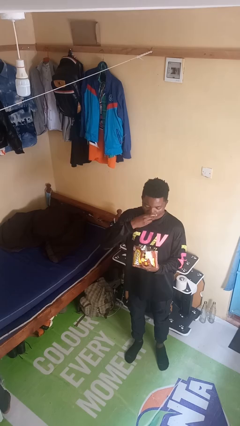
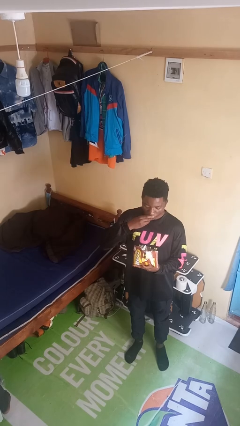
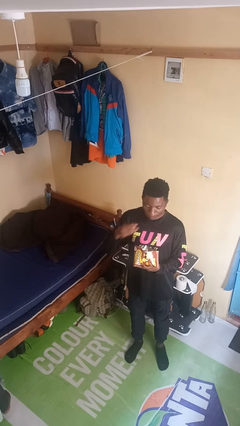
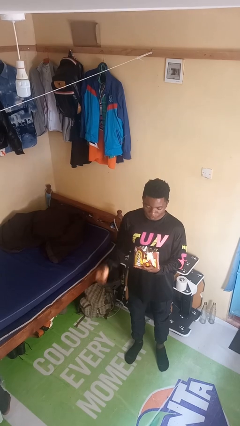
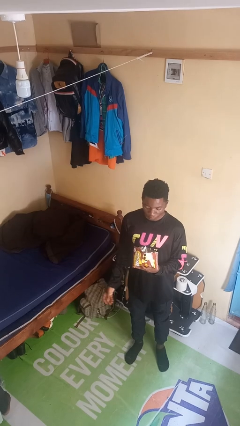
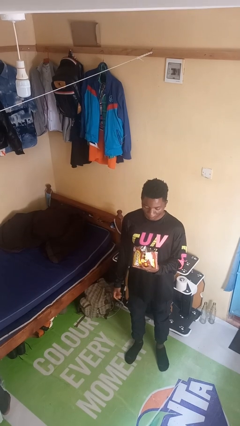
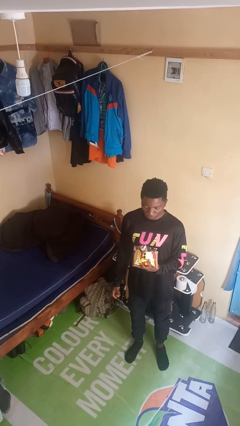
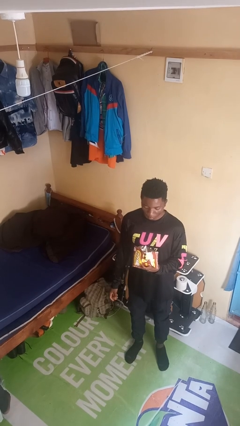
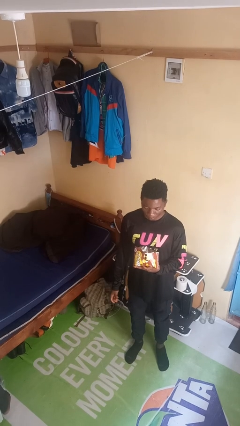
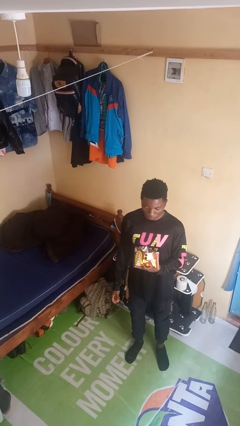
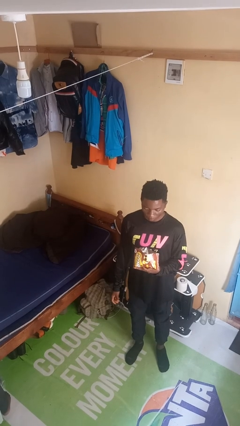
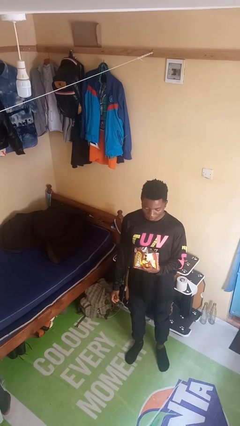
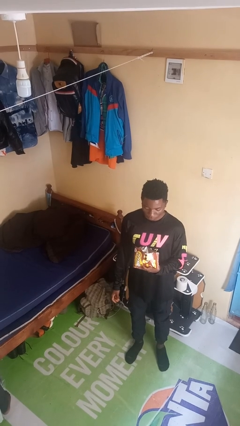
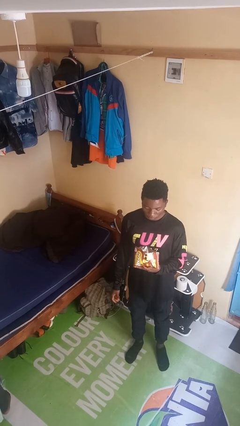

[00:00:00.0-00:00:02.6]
person eats snack from bag

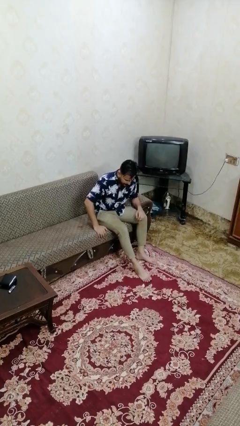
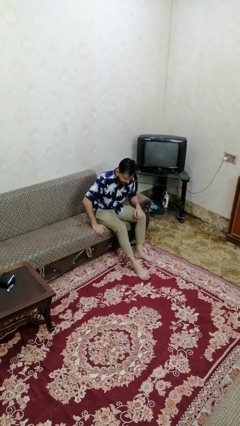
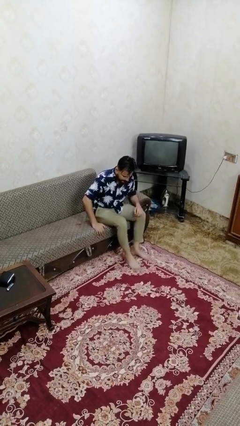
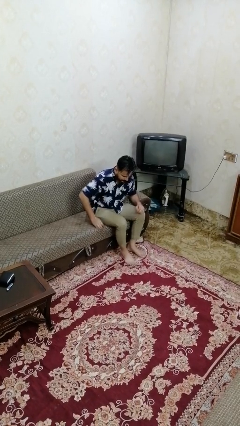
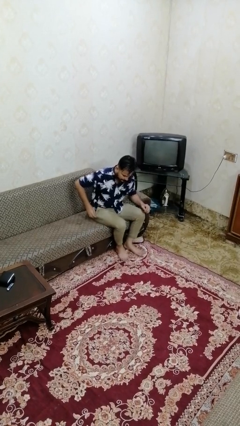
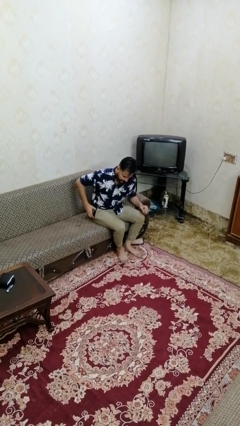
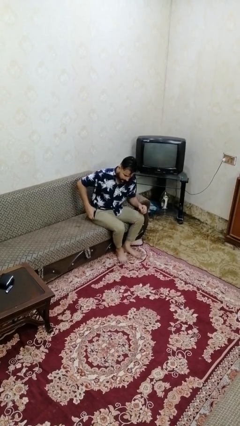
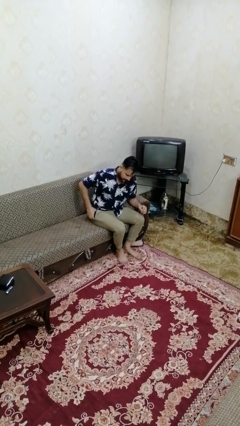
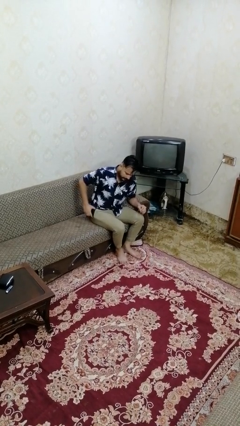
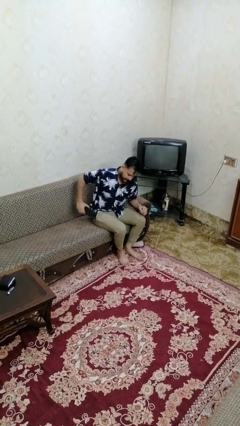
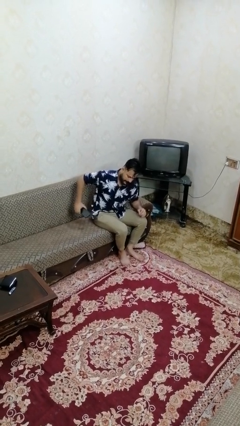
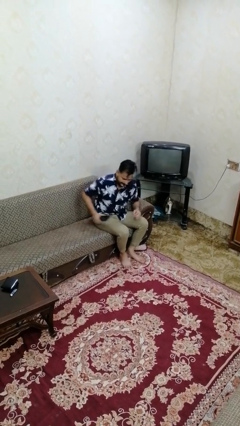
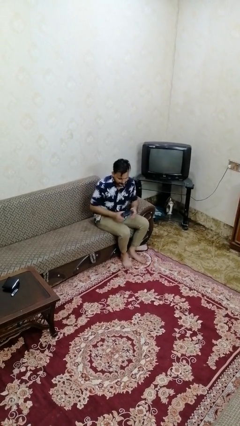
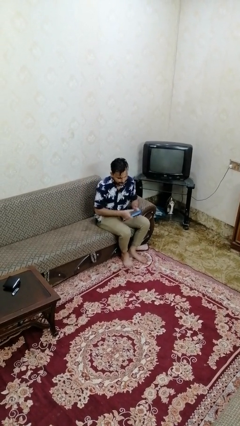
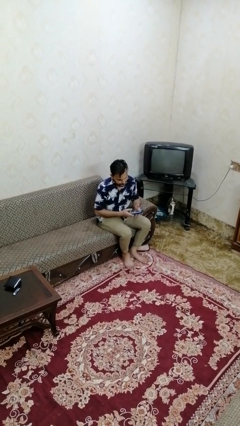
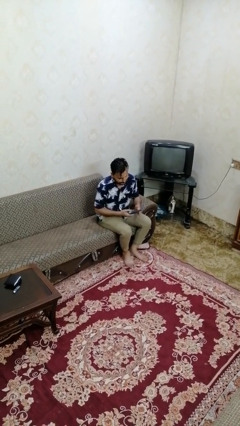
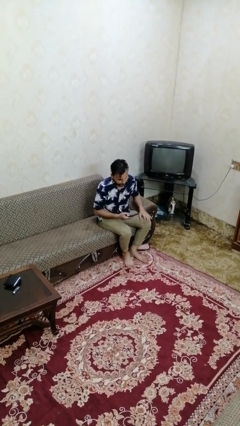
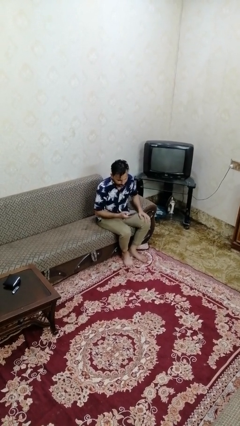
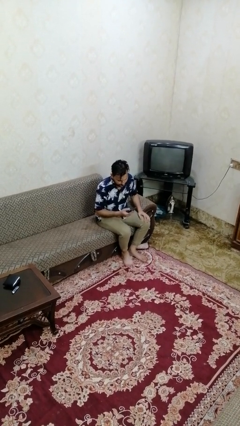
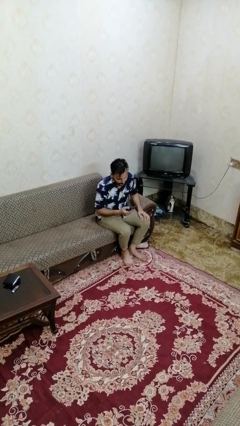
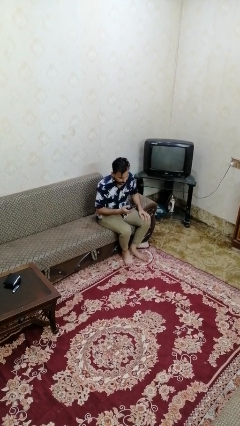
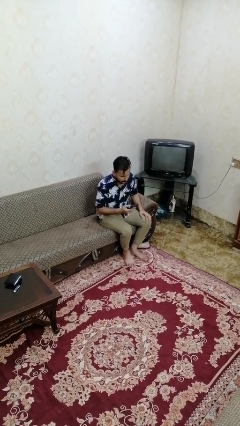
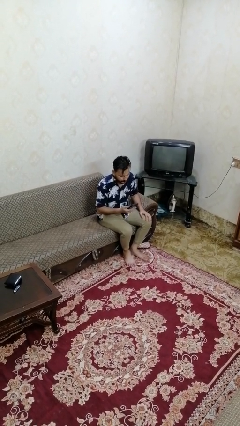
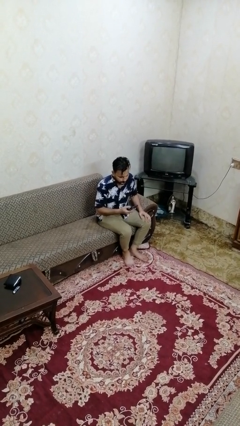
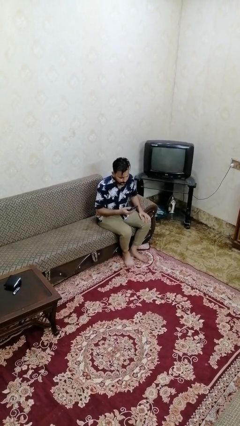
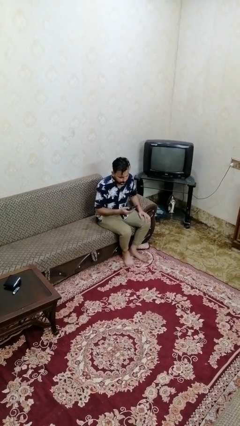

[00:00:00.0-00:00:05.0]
person takes phone from pocket

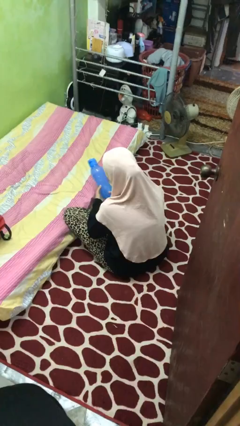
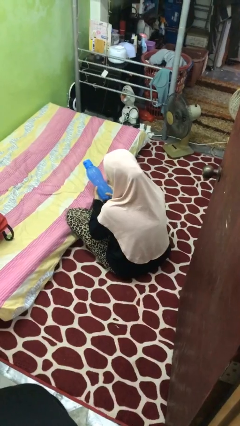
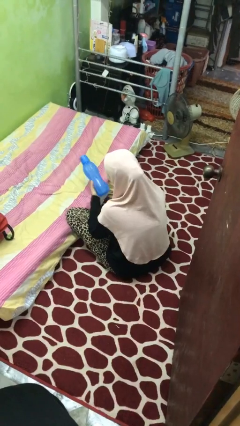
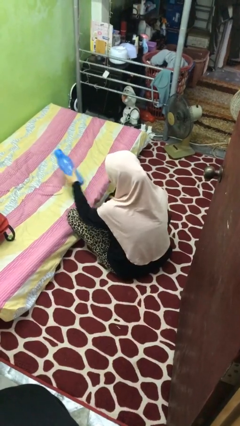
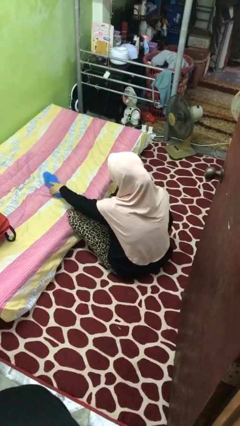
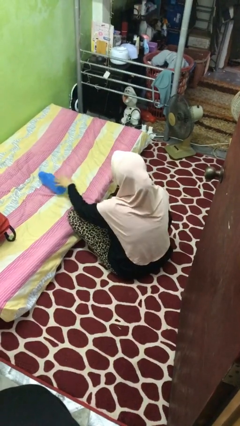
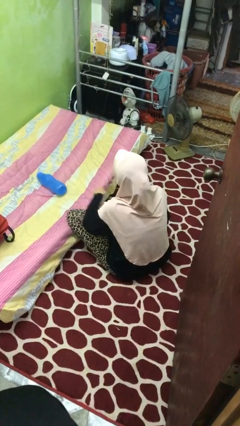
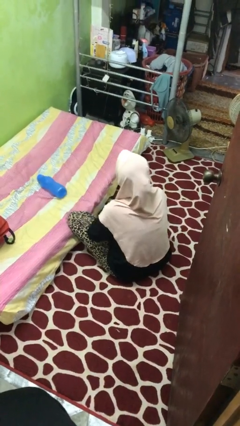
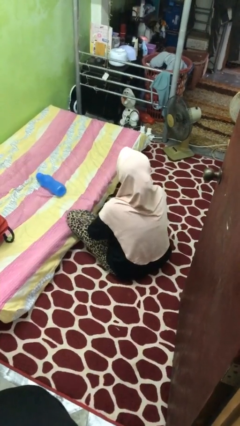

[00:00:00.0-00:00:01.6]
person puts down object on bed

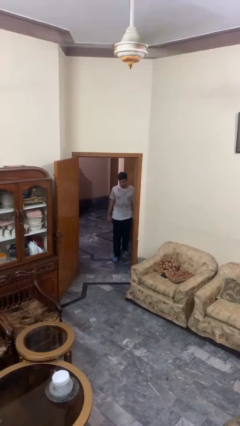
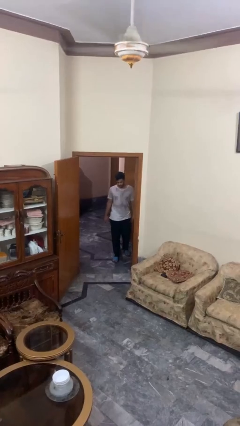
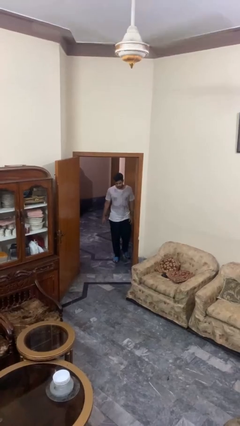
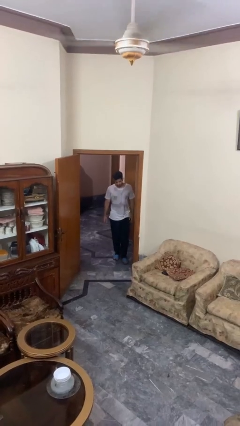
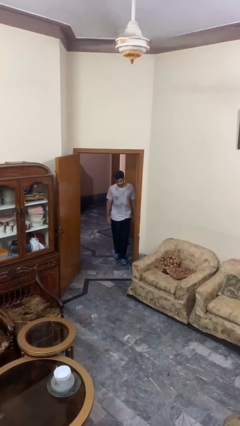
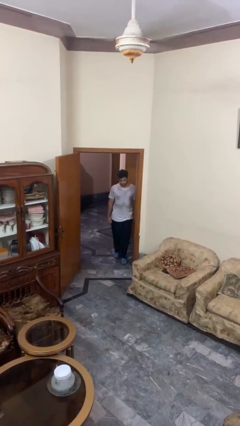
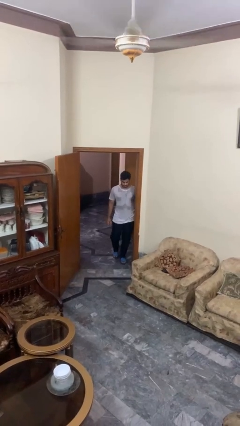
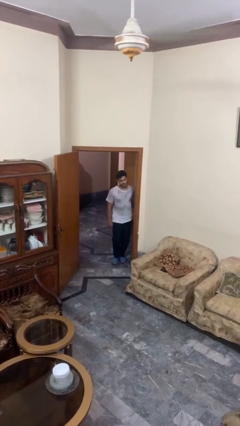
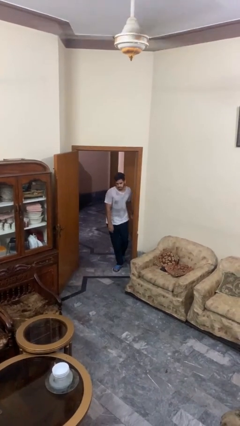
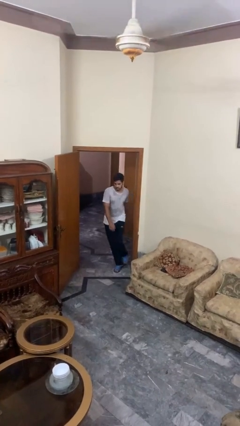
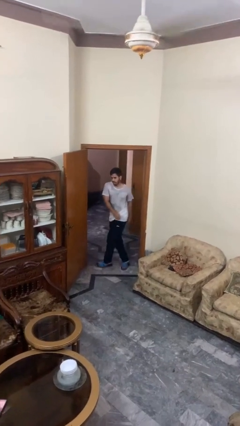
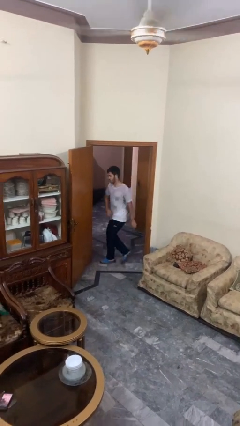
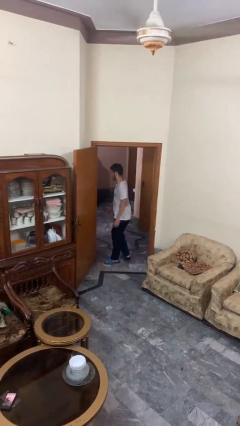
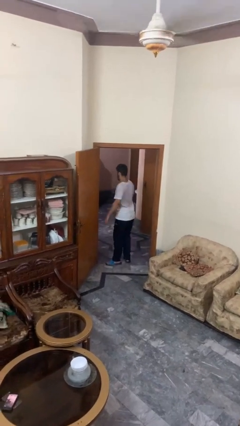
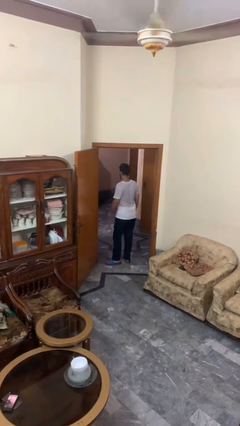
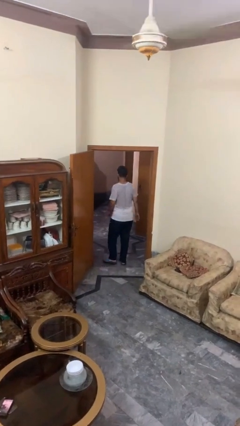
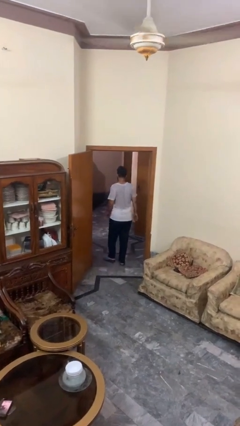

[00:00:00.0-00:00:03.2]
person bumps into wall

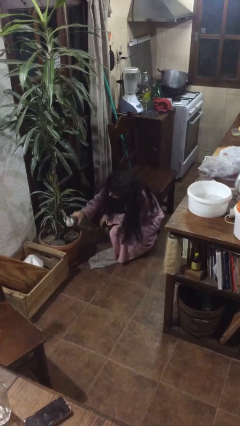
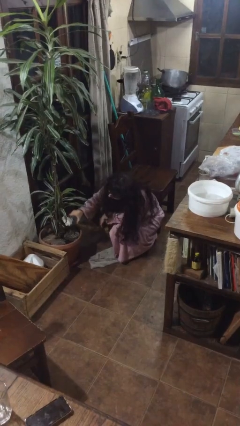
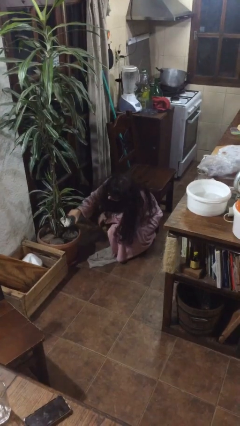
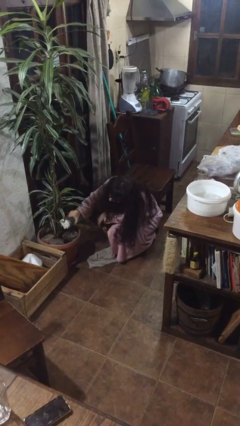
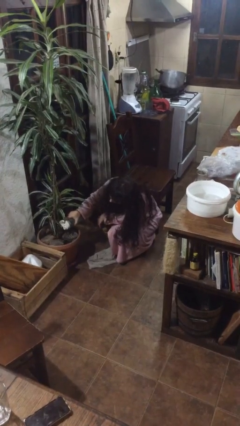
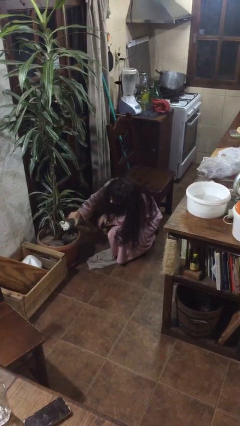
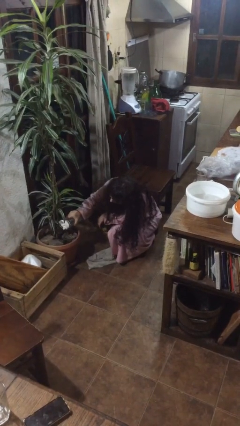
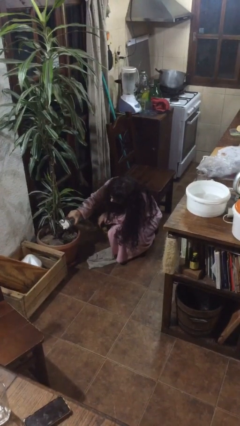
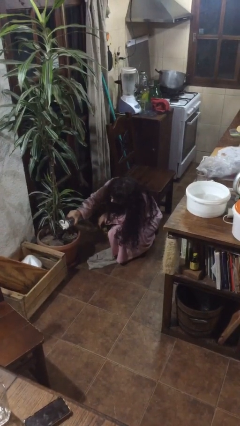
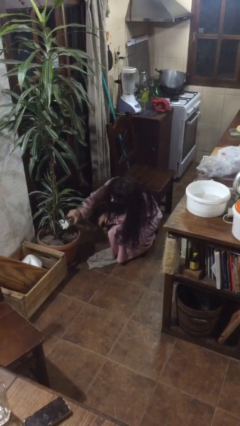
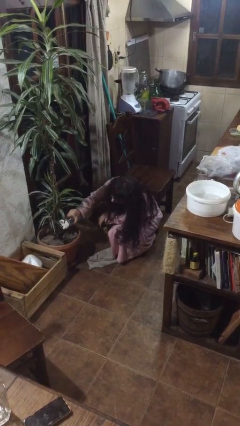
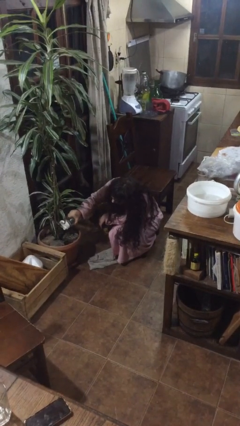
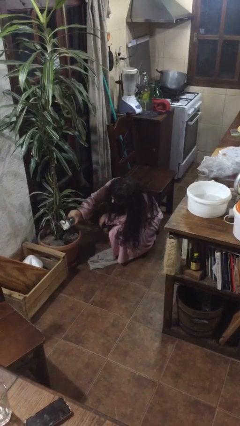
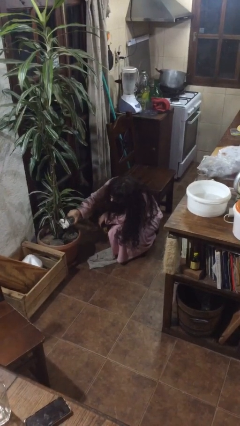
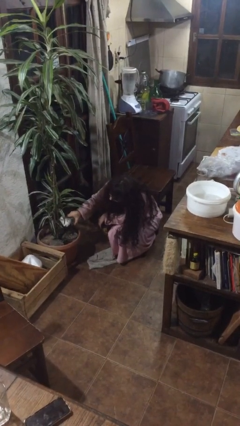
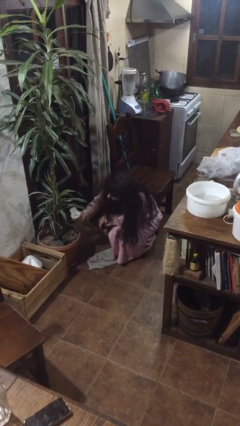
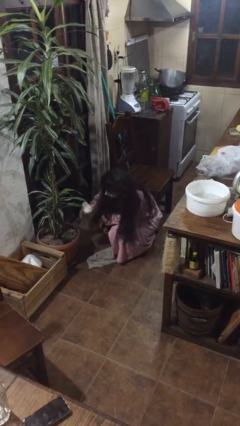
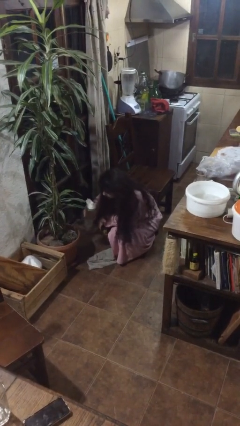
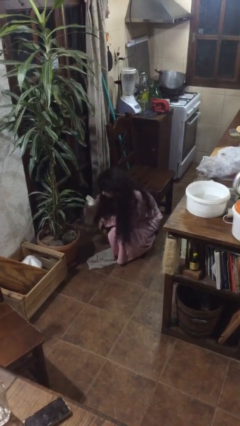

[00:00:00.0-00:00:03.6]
person waters houseplant

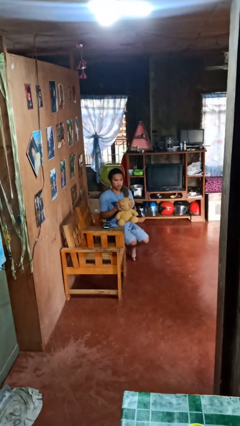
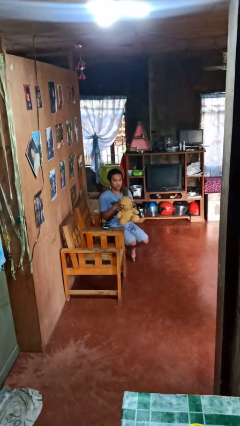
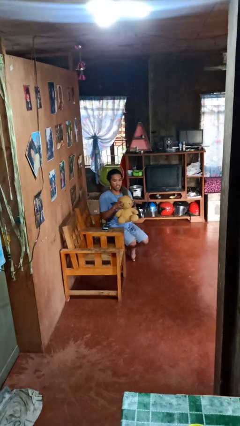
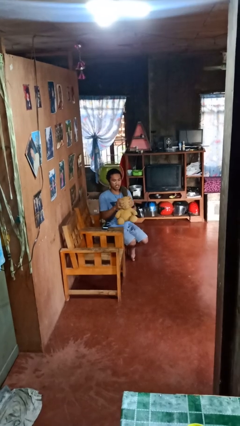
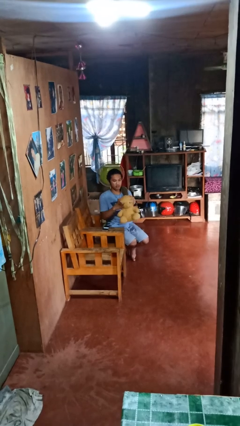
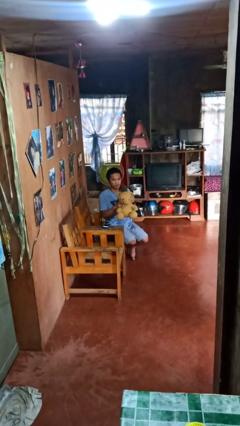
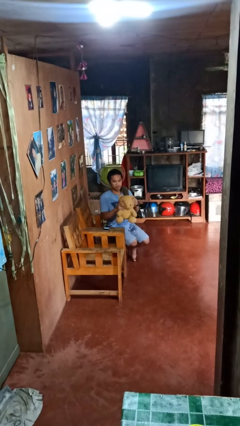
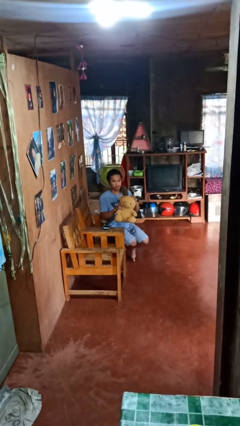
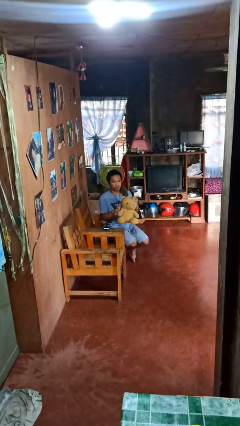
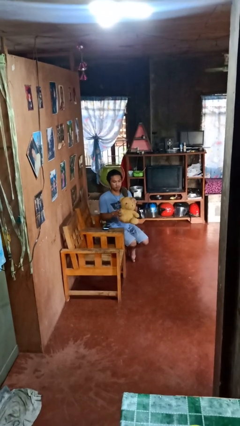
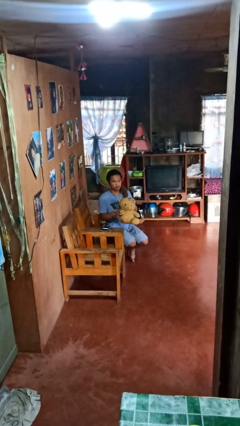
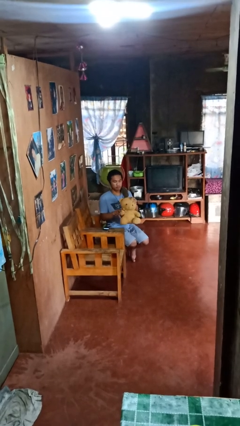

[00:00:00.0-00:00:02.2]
person squeezes object
